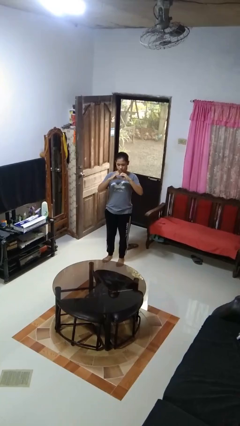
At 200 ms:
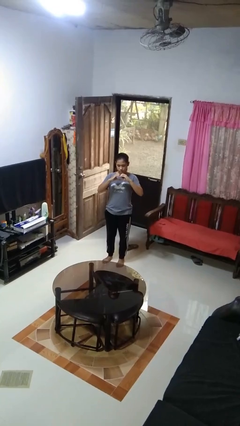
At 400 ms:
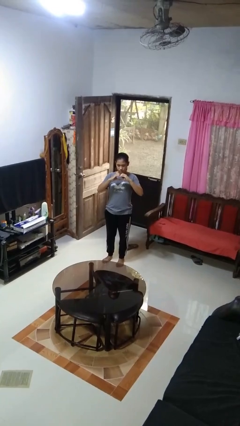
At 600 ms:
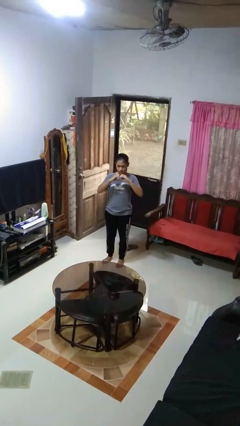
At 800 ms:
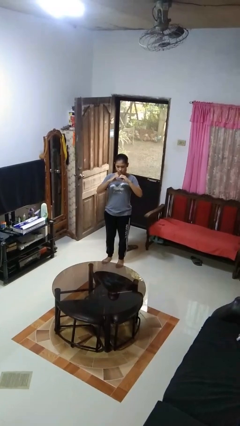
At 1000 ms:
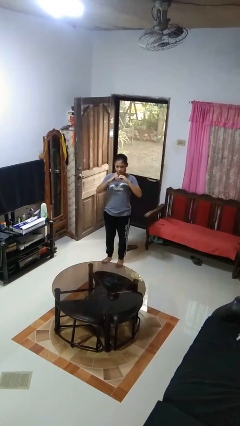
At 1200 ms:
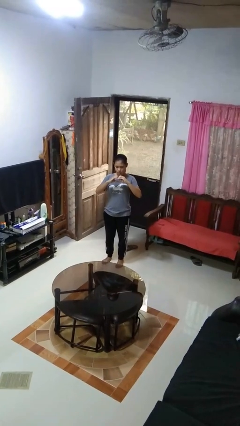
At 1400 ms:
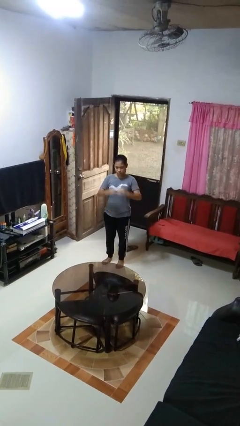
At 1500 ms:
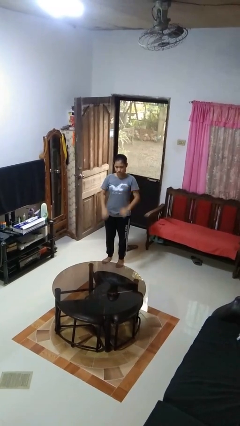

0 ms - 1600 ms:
person gestures heart

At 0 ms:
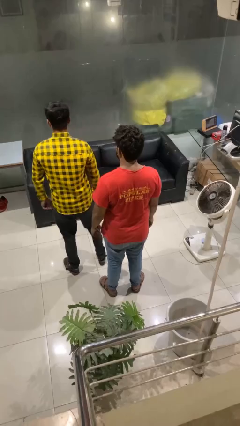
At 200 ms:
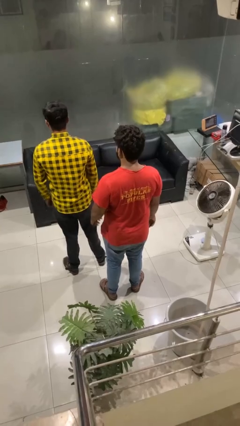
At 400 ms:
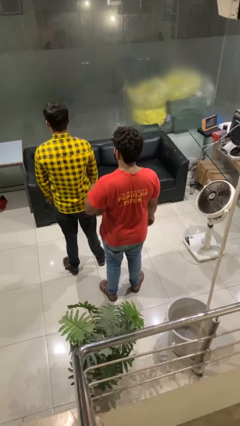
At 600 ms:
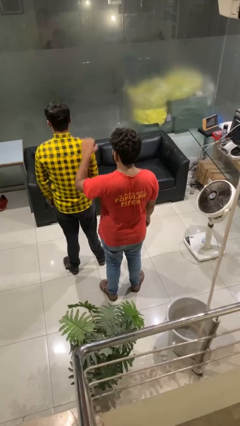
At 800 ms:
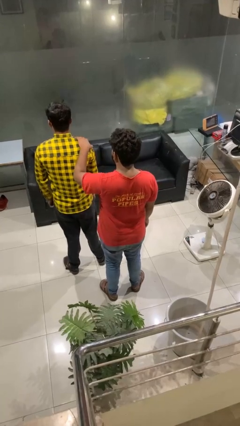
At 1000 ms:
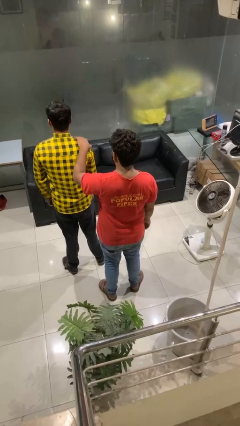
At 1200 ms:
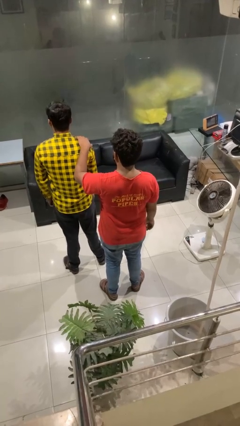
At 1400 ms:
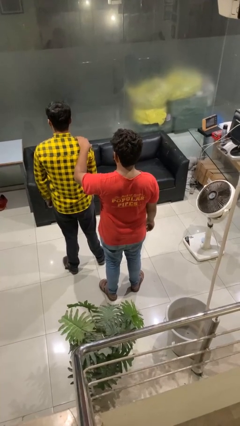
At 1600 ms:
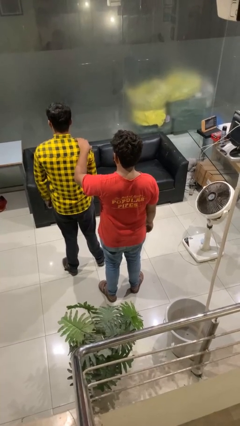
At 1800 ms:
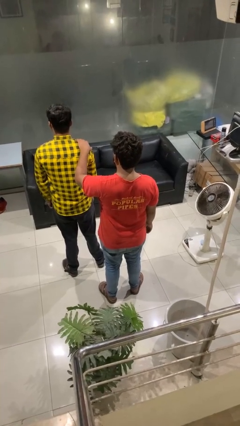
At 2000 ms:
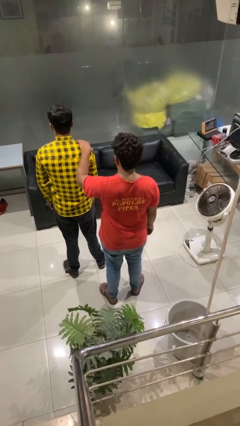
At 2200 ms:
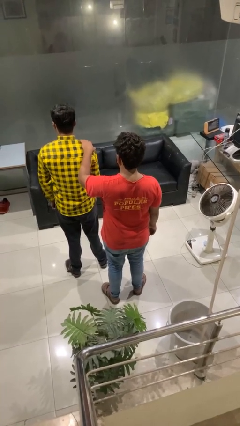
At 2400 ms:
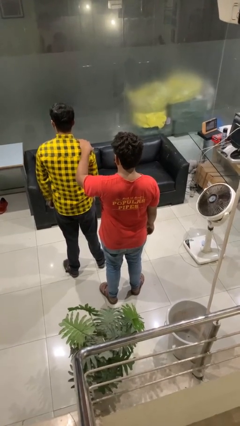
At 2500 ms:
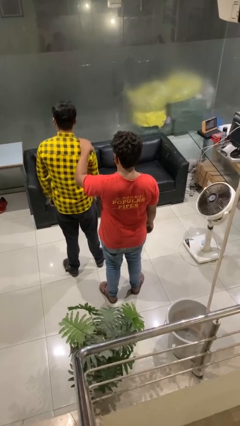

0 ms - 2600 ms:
person grabs person by shoulder

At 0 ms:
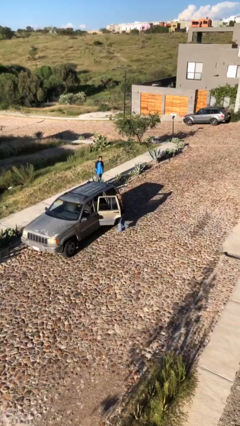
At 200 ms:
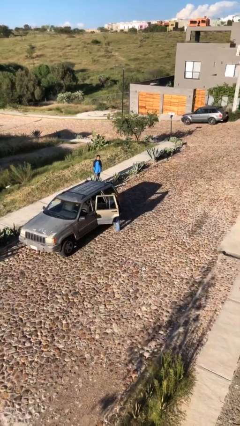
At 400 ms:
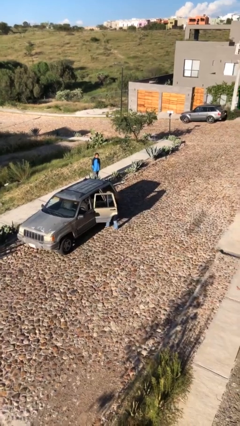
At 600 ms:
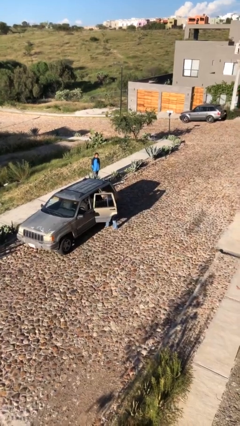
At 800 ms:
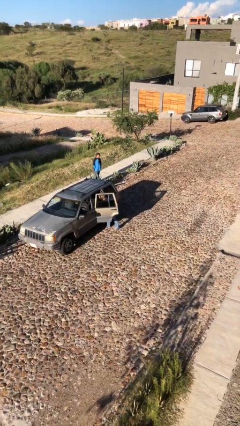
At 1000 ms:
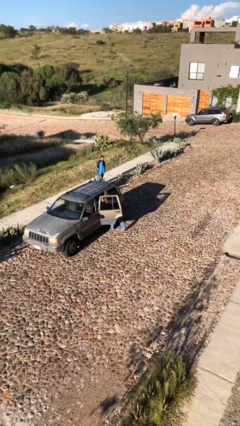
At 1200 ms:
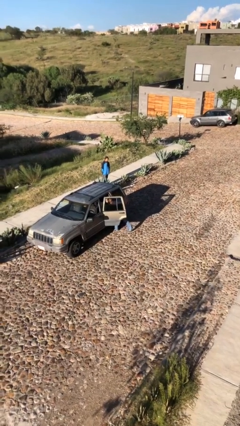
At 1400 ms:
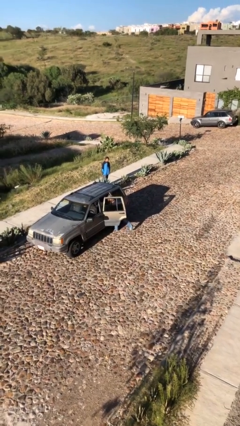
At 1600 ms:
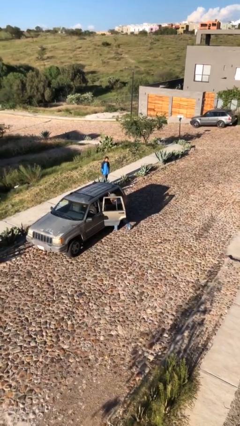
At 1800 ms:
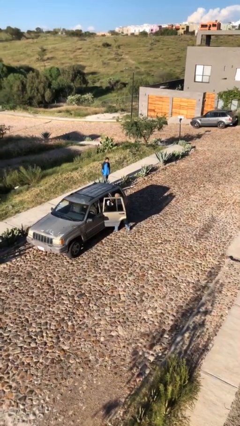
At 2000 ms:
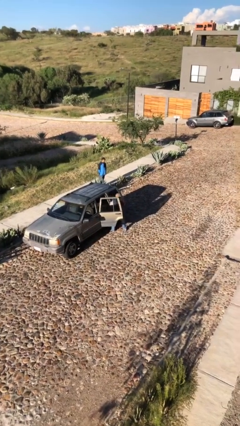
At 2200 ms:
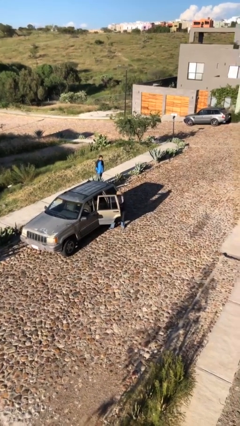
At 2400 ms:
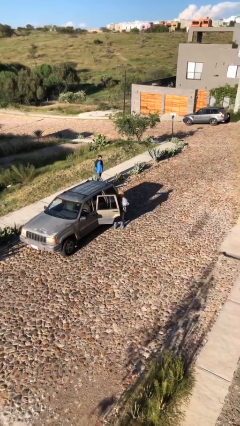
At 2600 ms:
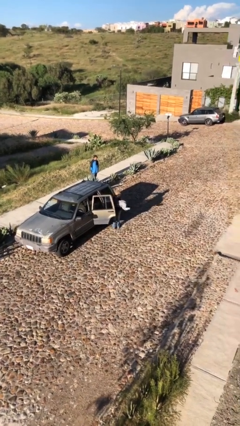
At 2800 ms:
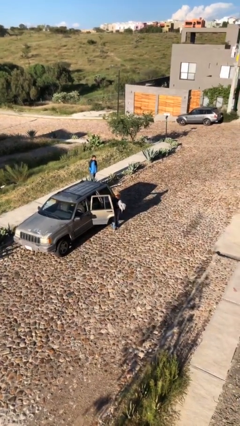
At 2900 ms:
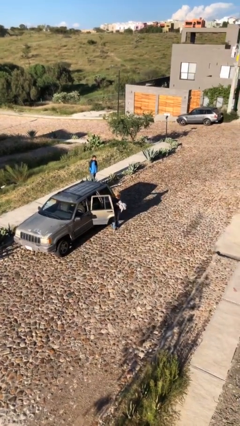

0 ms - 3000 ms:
person unloads car

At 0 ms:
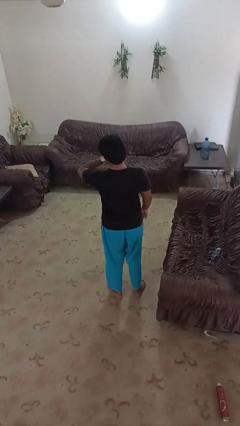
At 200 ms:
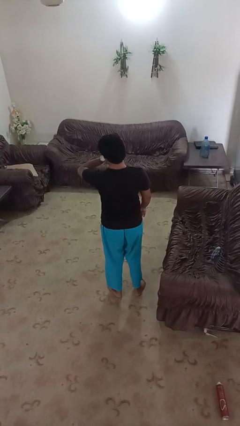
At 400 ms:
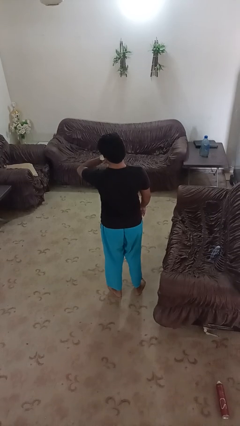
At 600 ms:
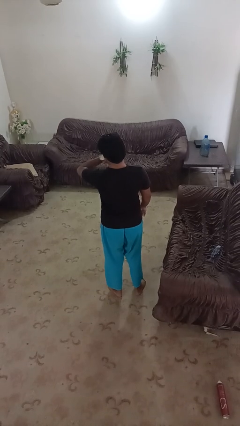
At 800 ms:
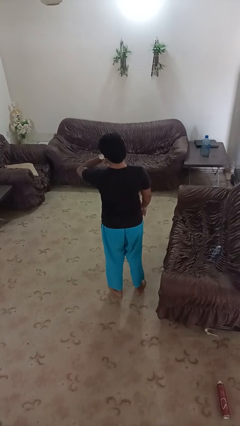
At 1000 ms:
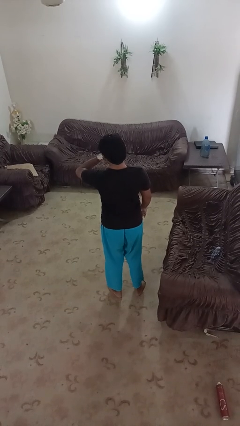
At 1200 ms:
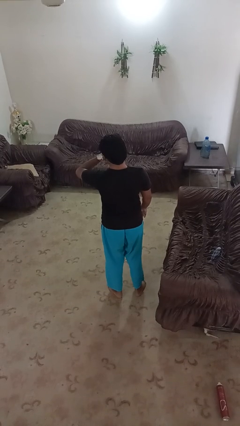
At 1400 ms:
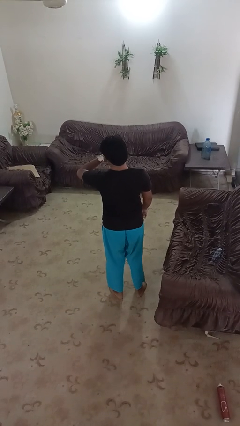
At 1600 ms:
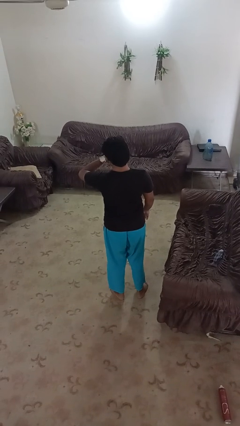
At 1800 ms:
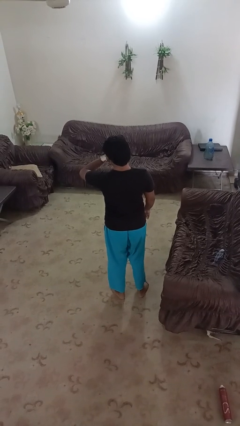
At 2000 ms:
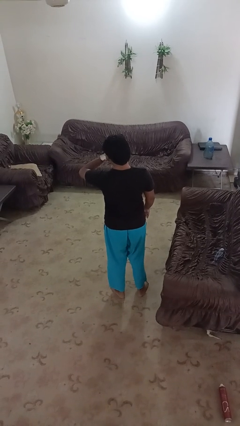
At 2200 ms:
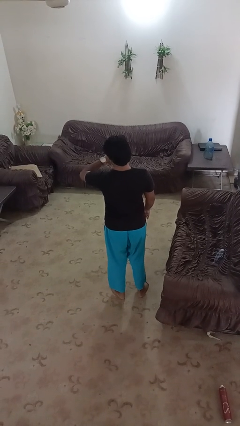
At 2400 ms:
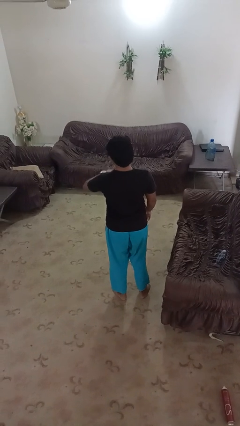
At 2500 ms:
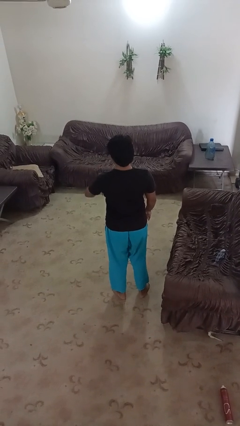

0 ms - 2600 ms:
person looks at wristwatch

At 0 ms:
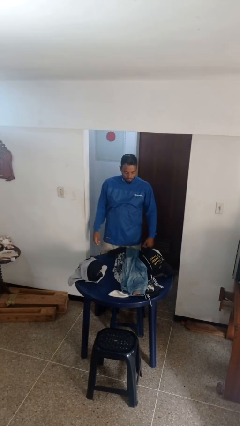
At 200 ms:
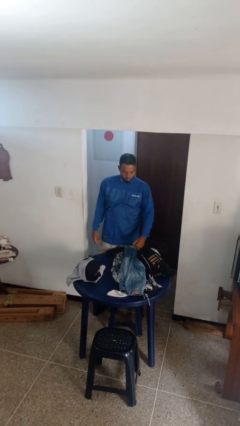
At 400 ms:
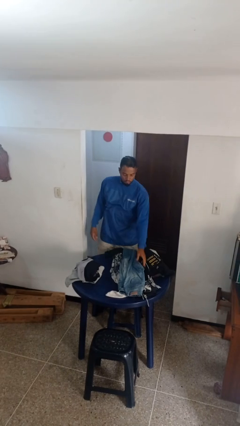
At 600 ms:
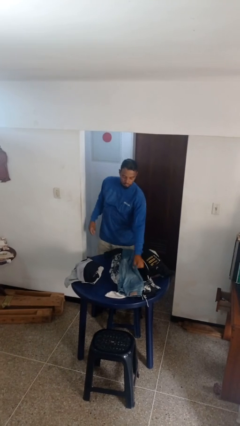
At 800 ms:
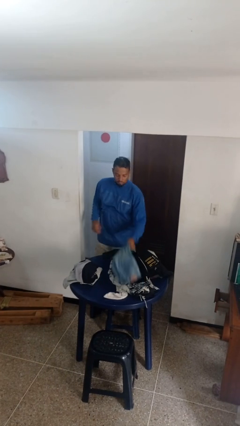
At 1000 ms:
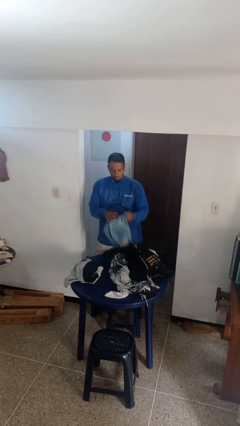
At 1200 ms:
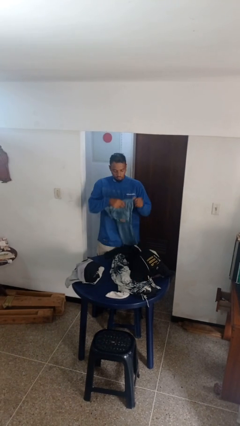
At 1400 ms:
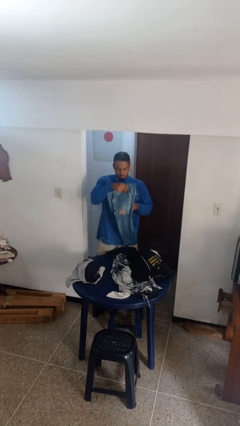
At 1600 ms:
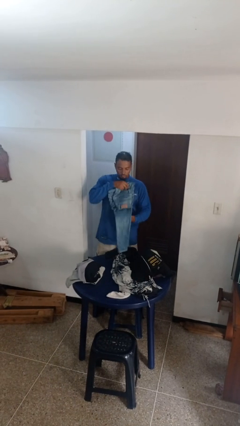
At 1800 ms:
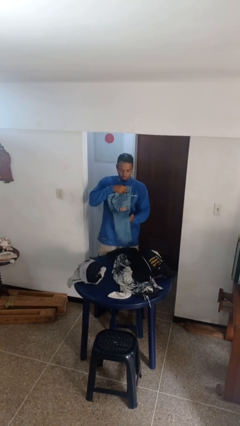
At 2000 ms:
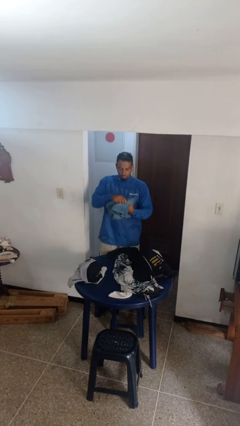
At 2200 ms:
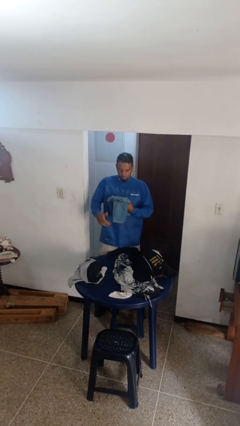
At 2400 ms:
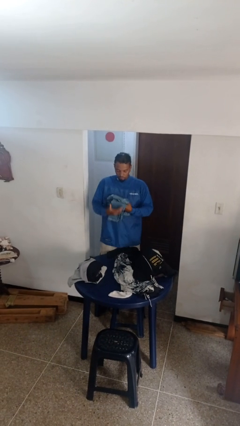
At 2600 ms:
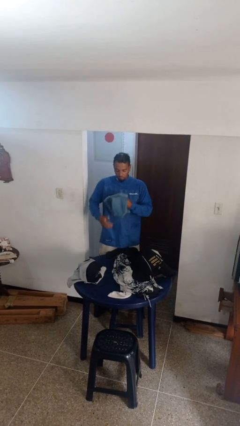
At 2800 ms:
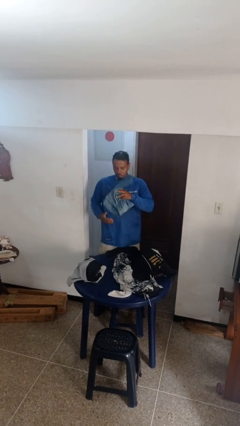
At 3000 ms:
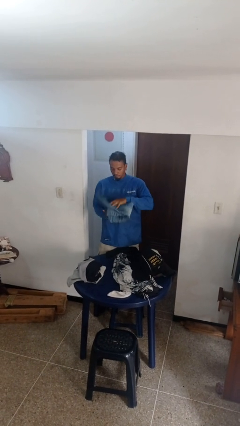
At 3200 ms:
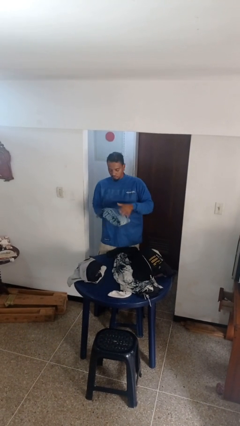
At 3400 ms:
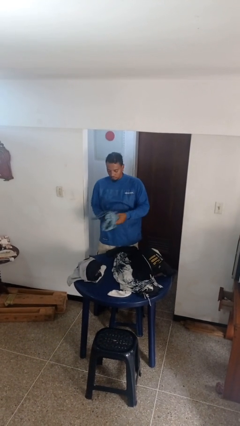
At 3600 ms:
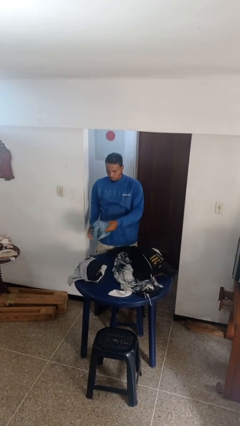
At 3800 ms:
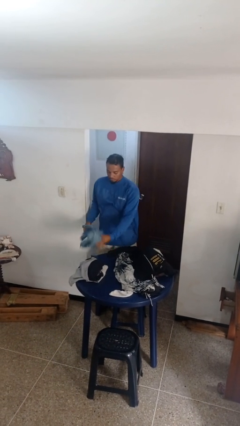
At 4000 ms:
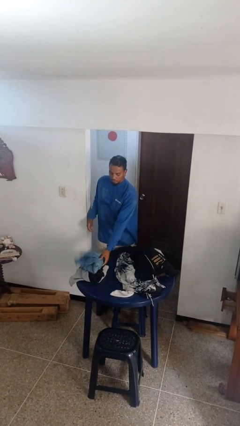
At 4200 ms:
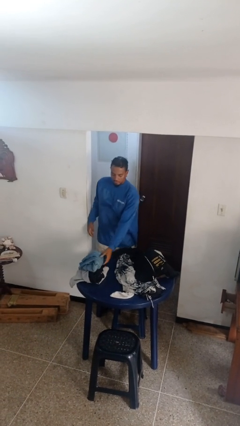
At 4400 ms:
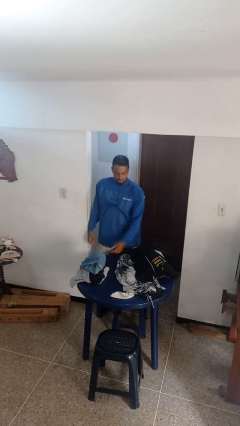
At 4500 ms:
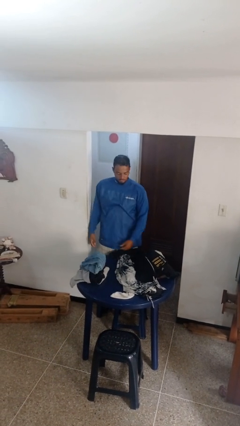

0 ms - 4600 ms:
person folds pants

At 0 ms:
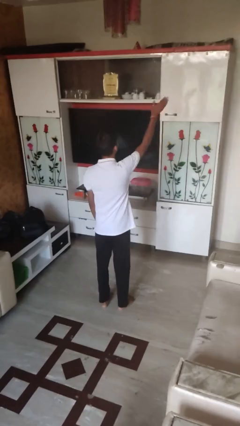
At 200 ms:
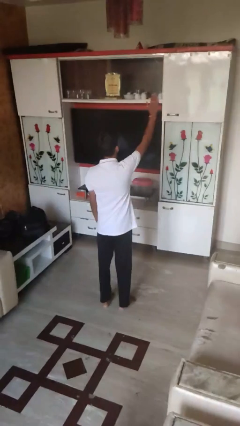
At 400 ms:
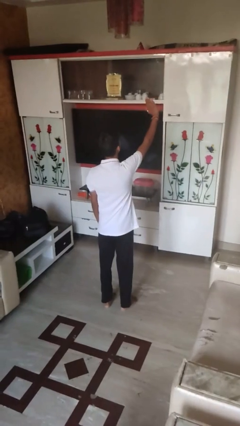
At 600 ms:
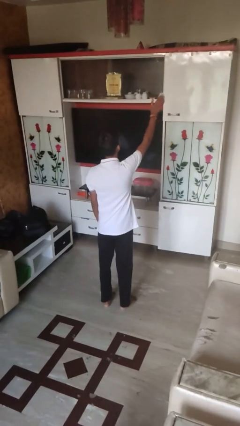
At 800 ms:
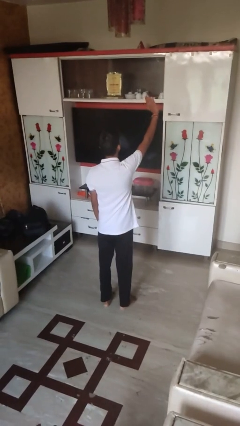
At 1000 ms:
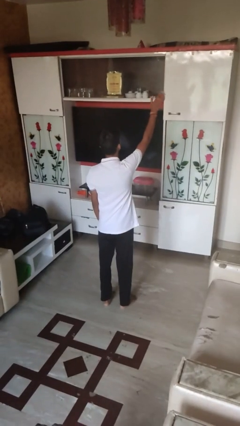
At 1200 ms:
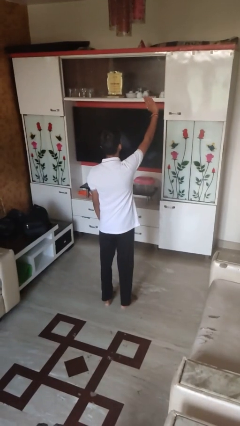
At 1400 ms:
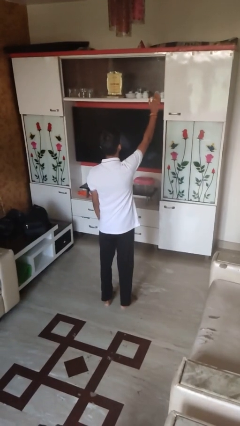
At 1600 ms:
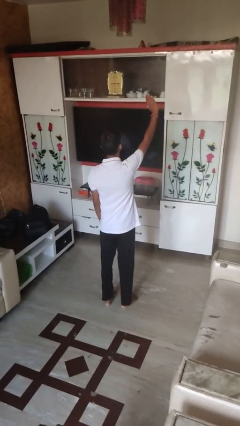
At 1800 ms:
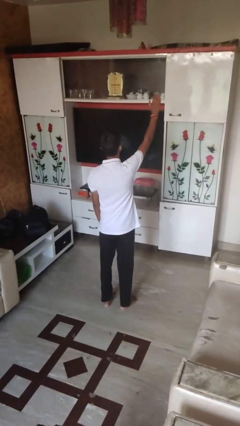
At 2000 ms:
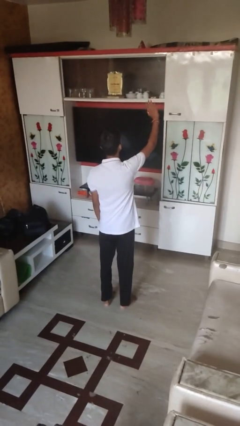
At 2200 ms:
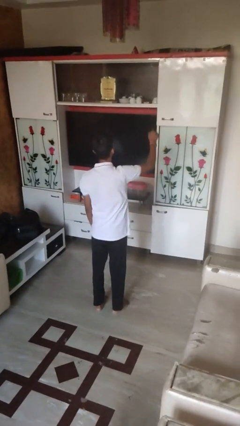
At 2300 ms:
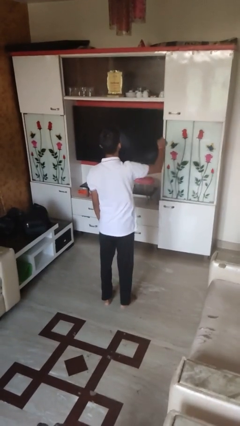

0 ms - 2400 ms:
person waves at person

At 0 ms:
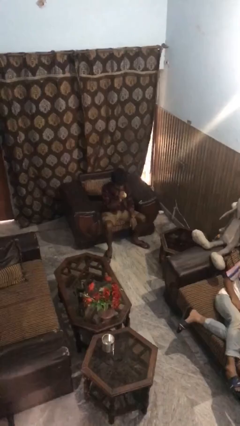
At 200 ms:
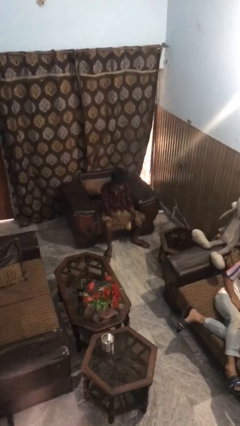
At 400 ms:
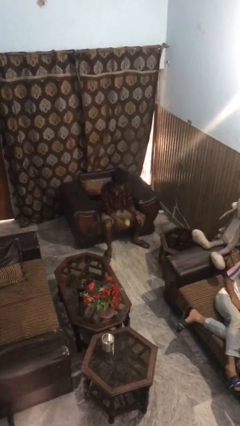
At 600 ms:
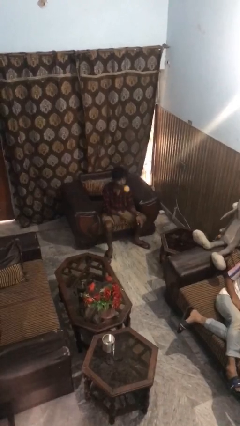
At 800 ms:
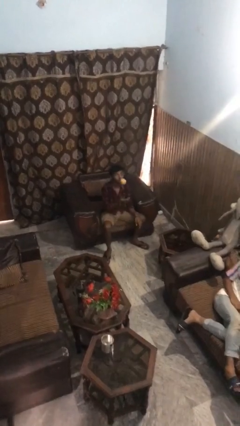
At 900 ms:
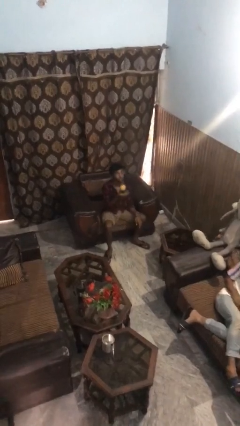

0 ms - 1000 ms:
person bounces ball on floor
